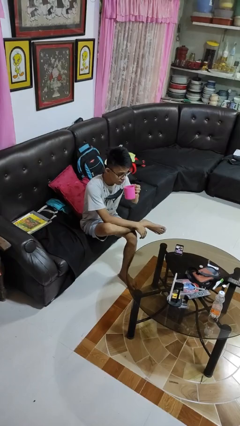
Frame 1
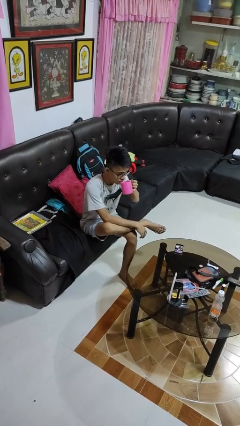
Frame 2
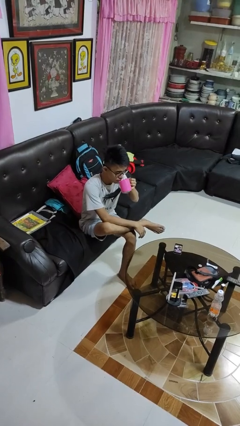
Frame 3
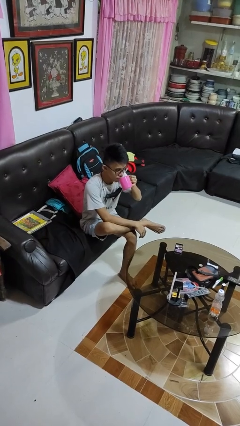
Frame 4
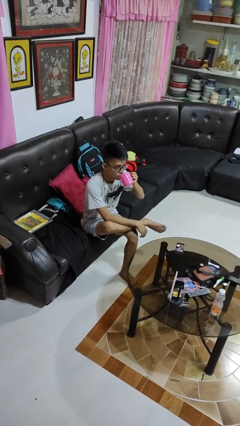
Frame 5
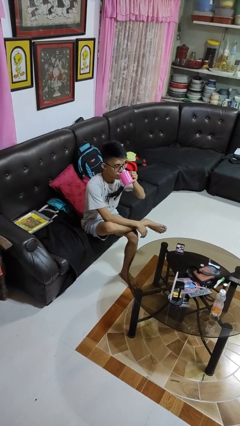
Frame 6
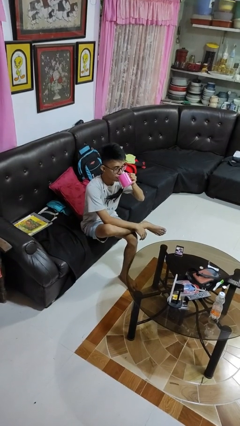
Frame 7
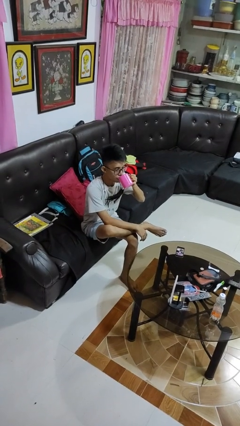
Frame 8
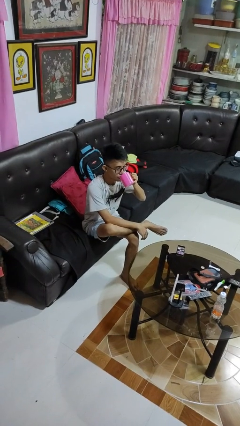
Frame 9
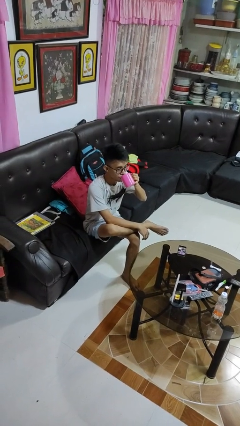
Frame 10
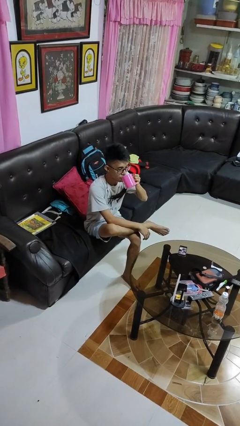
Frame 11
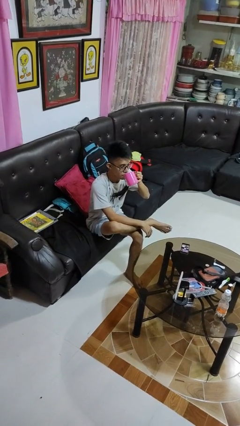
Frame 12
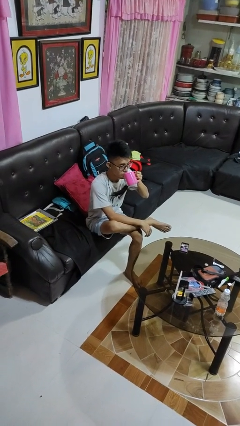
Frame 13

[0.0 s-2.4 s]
person drinks from mug

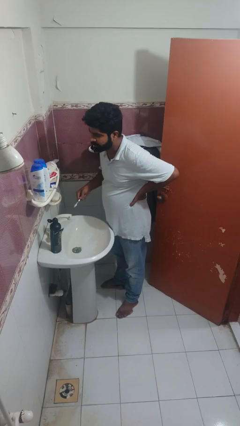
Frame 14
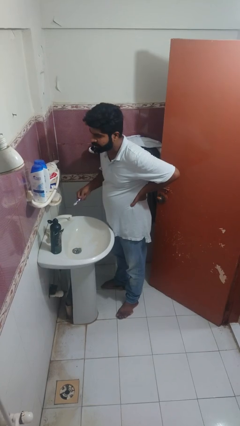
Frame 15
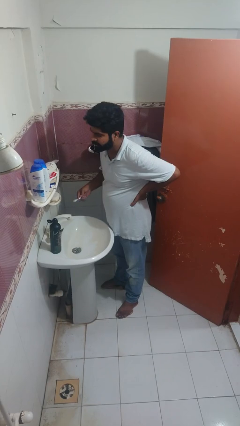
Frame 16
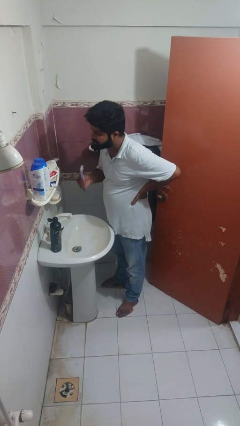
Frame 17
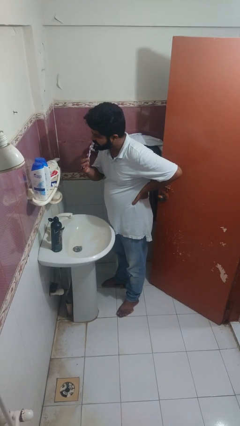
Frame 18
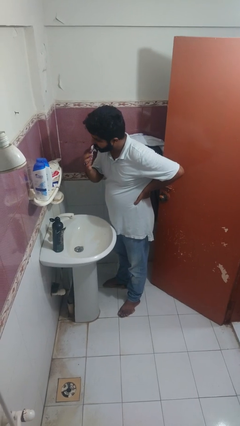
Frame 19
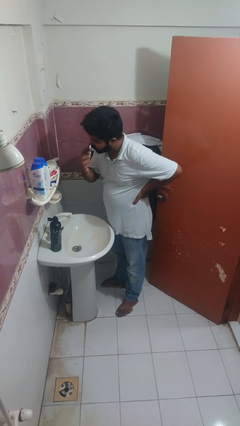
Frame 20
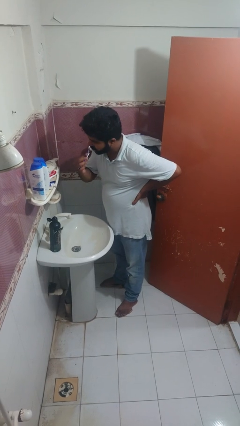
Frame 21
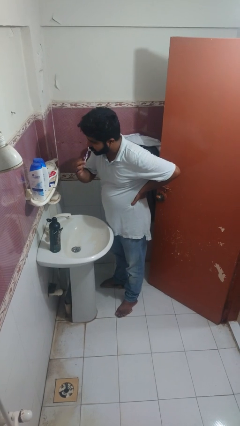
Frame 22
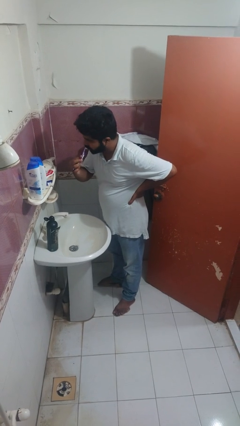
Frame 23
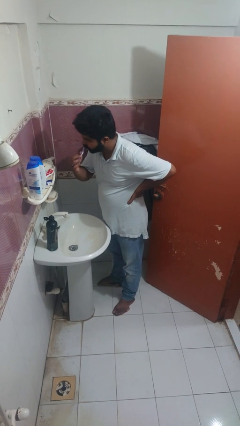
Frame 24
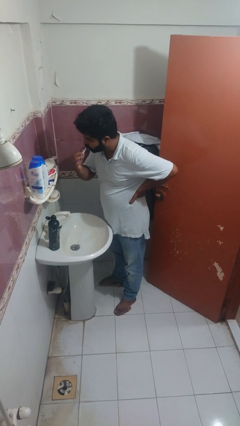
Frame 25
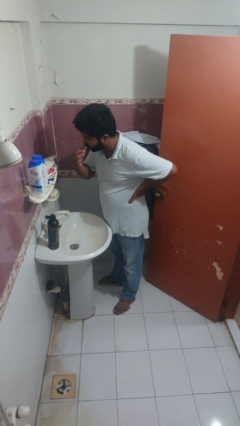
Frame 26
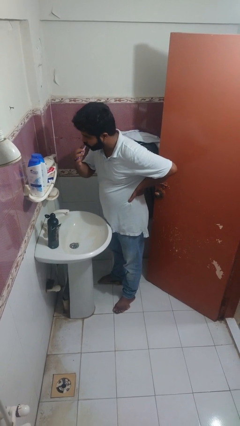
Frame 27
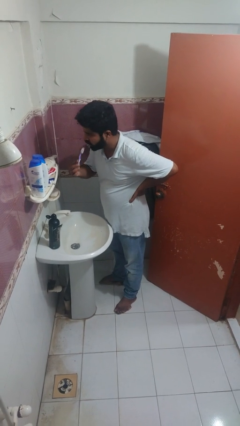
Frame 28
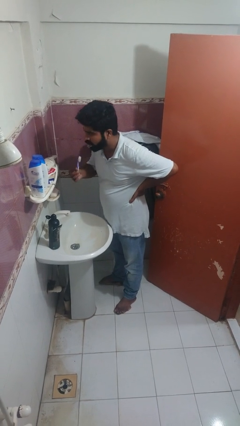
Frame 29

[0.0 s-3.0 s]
person brushes teeth

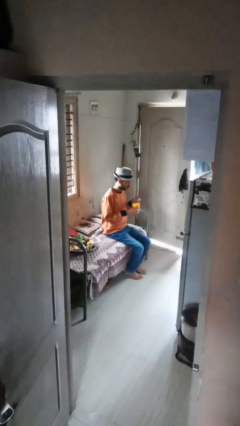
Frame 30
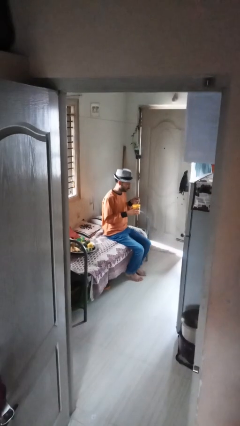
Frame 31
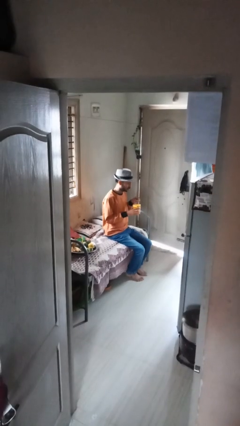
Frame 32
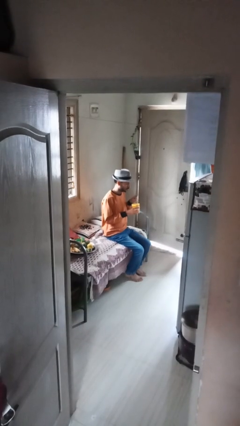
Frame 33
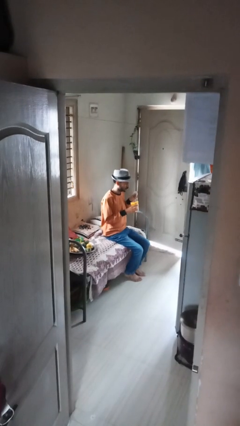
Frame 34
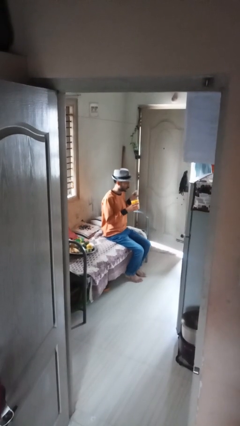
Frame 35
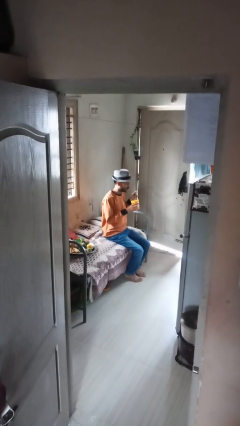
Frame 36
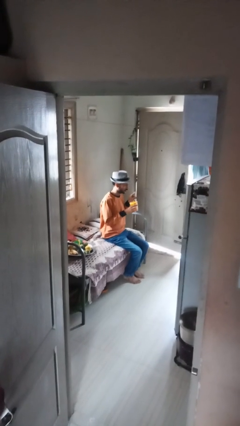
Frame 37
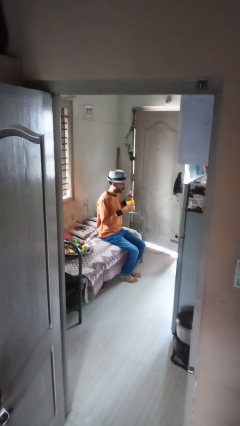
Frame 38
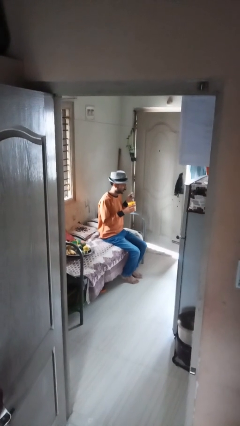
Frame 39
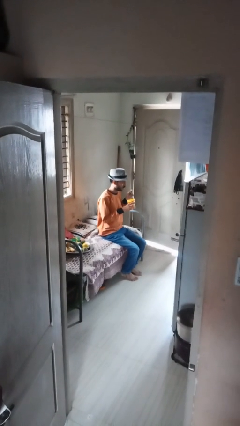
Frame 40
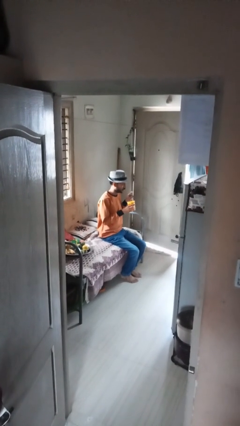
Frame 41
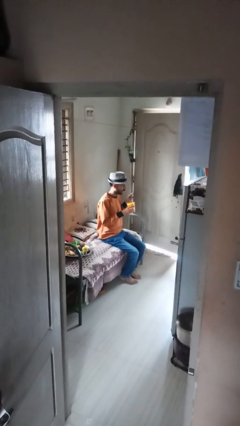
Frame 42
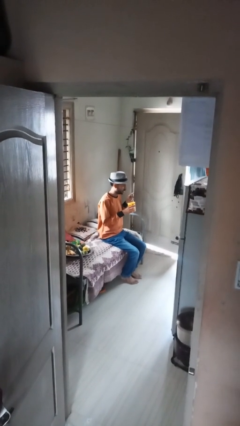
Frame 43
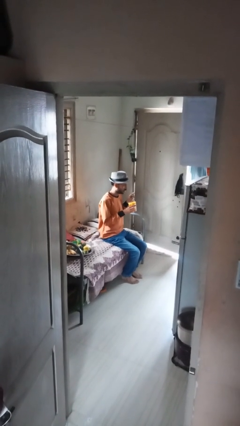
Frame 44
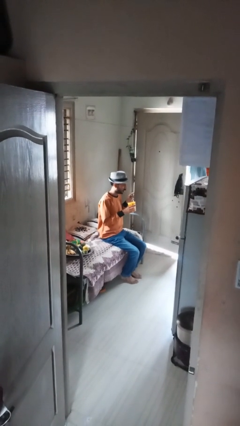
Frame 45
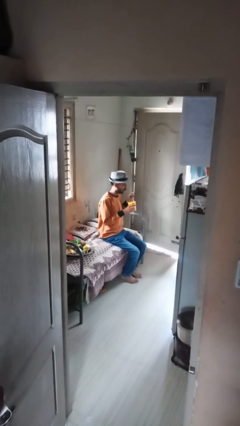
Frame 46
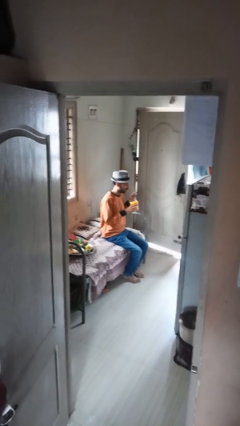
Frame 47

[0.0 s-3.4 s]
person stirs mug

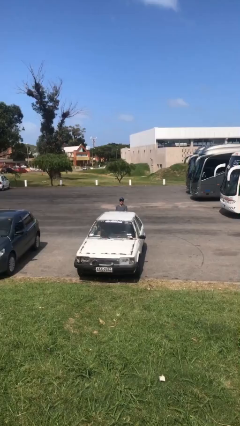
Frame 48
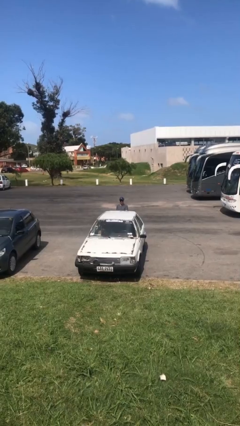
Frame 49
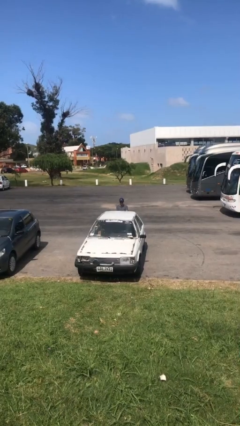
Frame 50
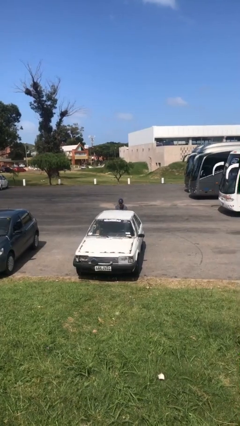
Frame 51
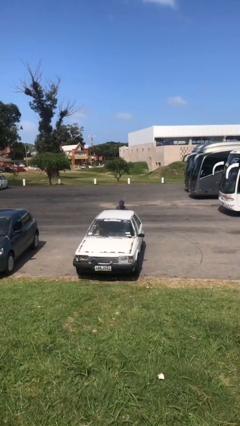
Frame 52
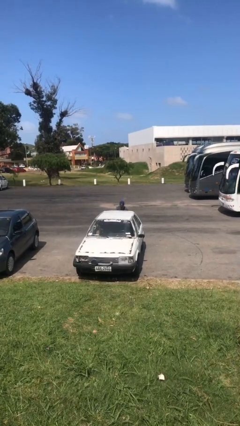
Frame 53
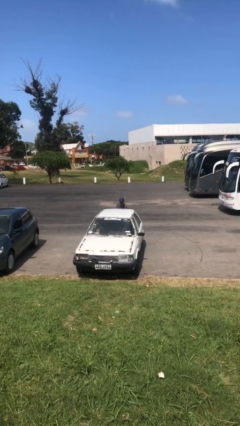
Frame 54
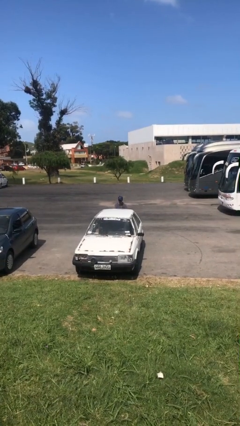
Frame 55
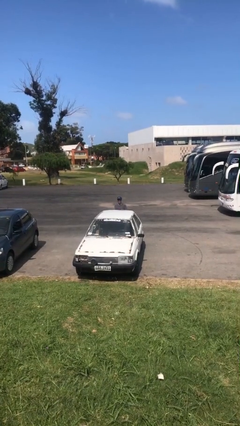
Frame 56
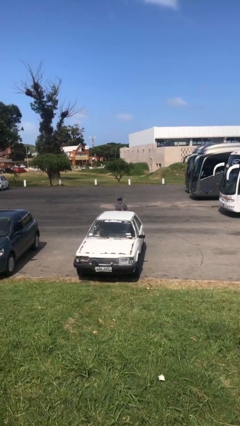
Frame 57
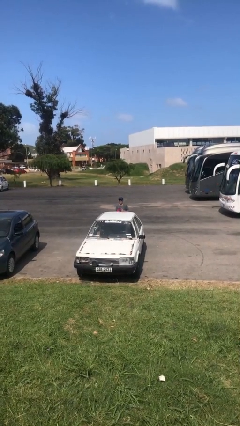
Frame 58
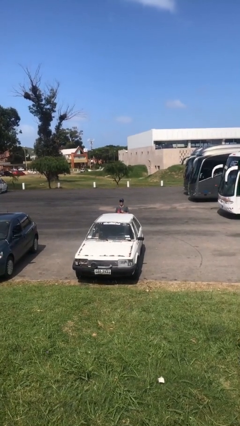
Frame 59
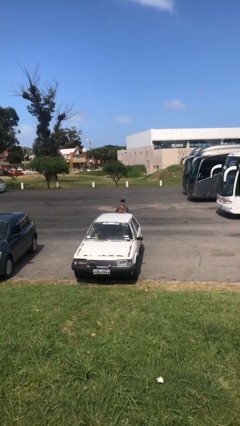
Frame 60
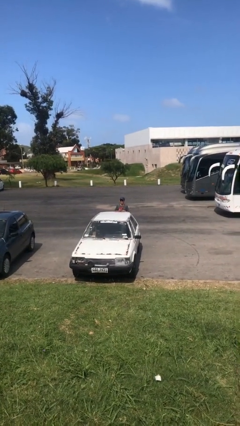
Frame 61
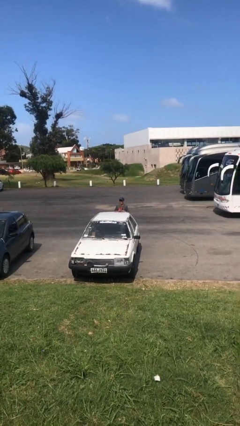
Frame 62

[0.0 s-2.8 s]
person unloads car

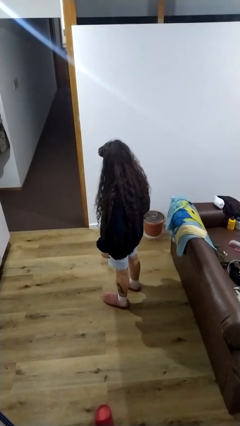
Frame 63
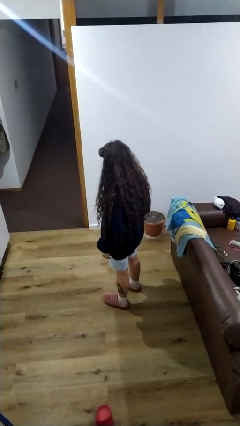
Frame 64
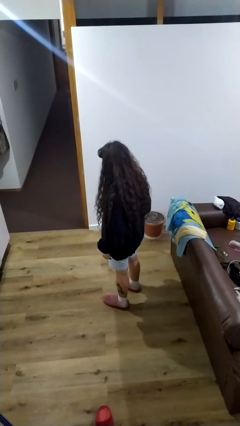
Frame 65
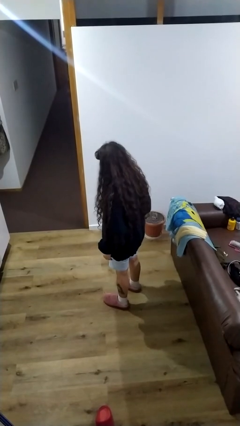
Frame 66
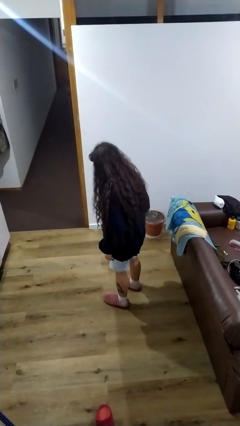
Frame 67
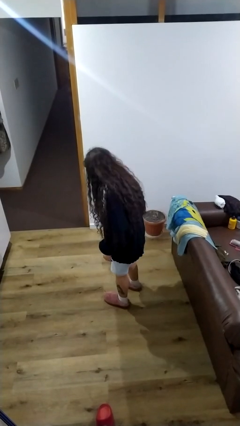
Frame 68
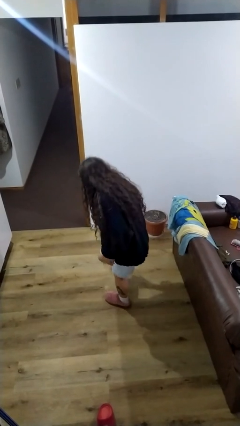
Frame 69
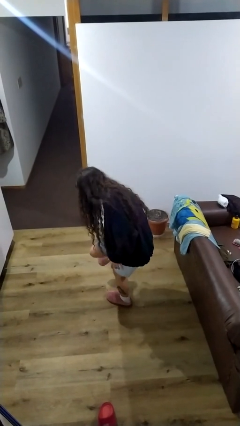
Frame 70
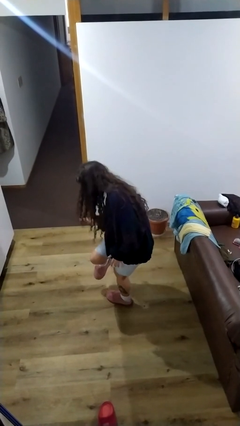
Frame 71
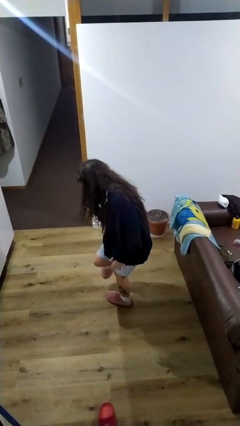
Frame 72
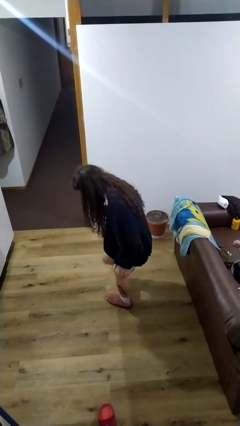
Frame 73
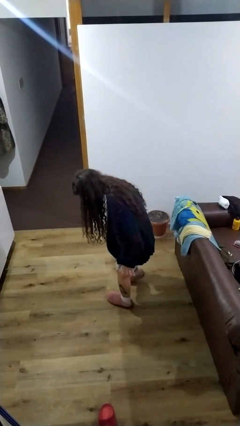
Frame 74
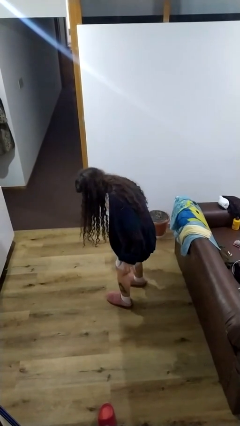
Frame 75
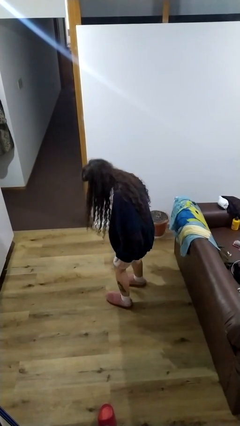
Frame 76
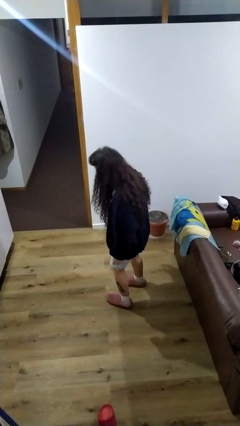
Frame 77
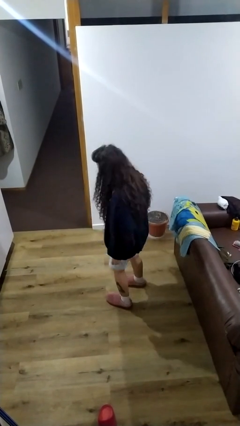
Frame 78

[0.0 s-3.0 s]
person swats bug

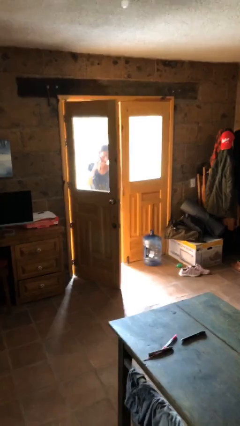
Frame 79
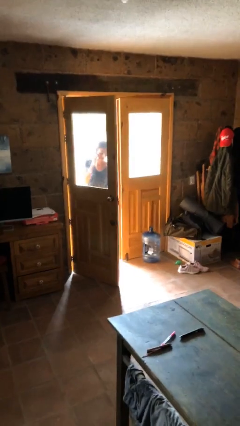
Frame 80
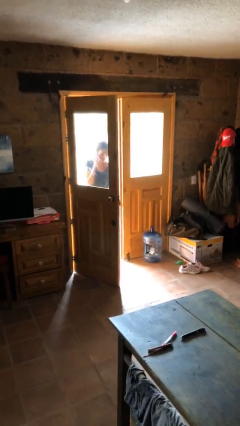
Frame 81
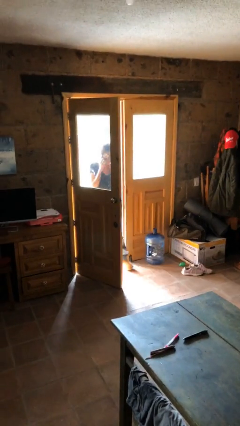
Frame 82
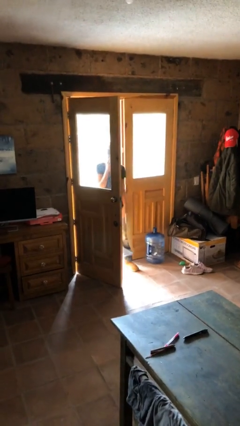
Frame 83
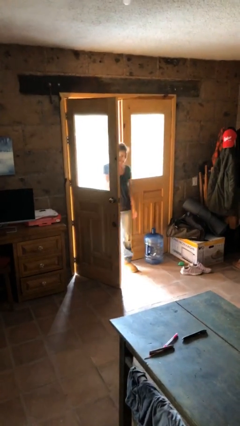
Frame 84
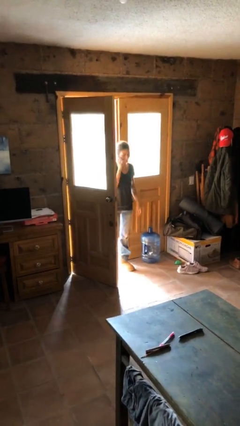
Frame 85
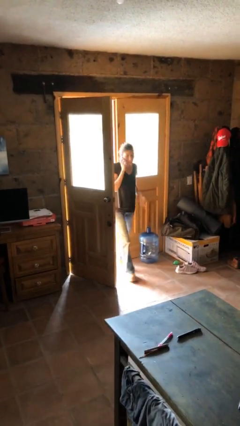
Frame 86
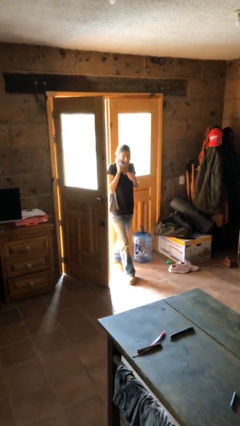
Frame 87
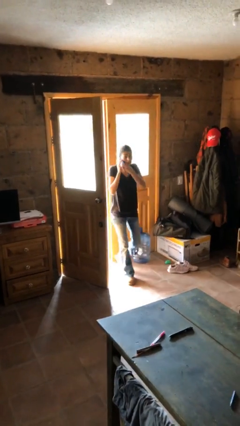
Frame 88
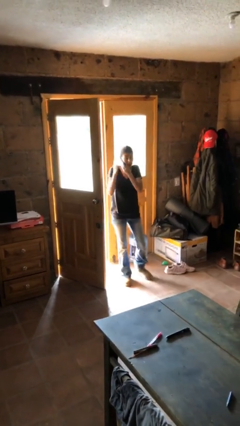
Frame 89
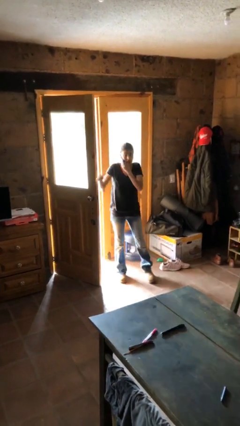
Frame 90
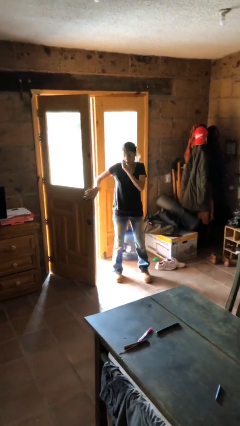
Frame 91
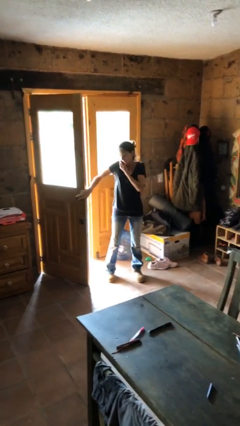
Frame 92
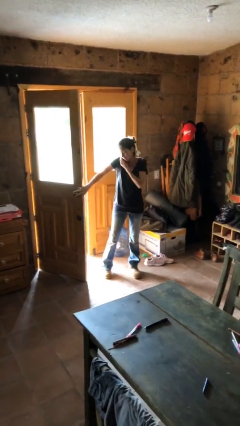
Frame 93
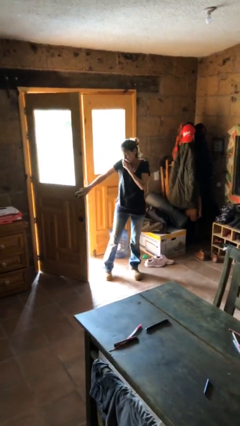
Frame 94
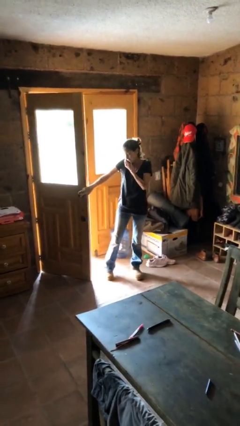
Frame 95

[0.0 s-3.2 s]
person enters scene through structure
